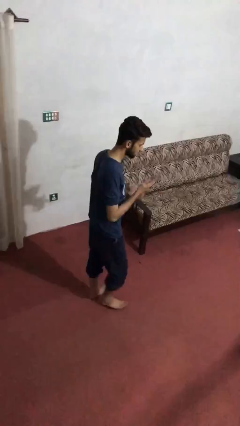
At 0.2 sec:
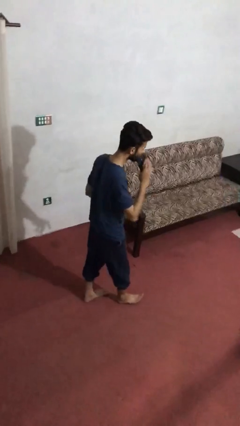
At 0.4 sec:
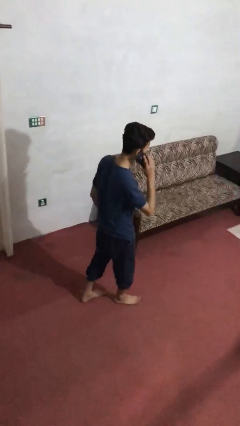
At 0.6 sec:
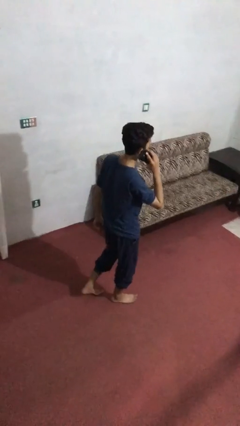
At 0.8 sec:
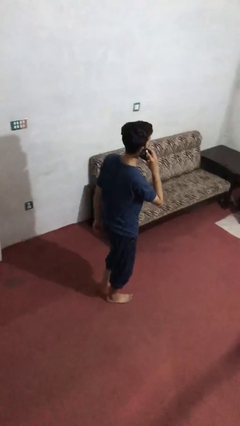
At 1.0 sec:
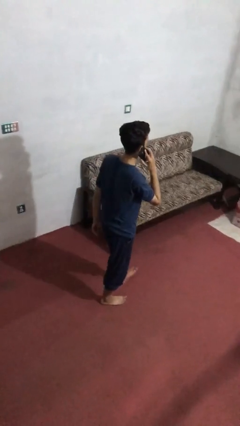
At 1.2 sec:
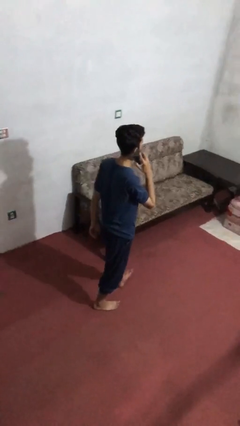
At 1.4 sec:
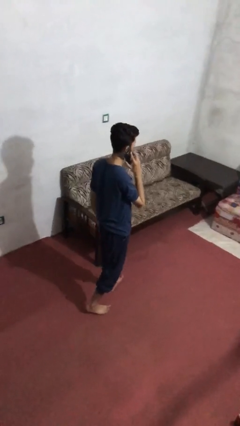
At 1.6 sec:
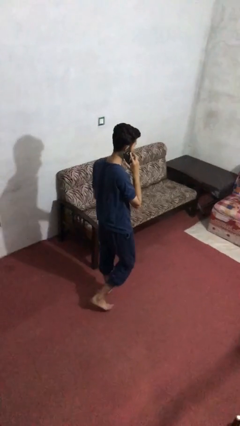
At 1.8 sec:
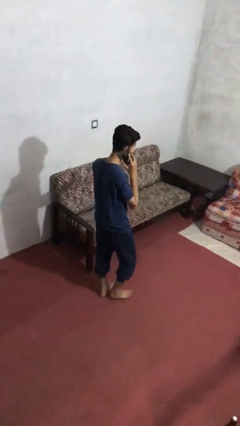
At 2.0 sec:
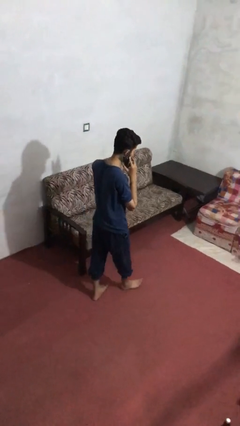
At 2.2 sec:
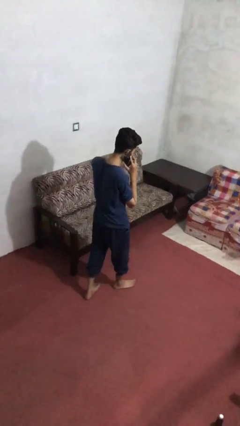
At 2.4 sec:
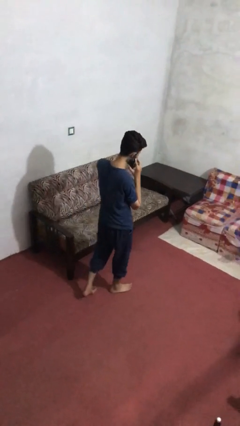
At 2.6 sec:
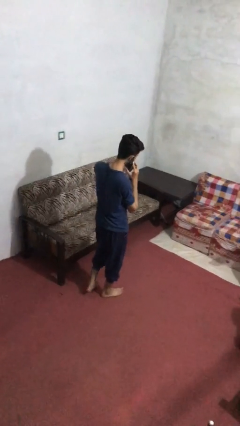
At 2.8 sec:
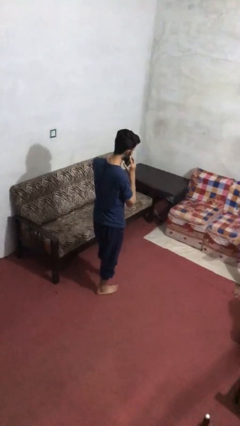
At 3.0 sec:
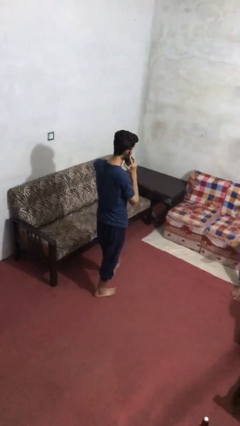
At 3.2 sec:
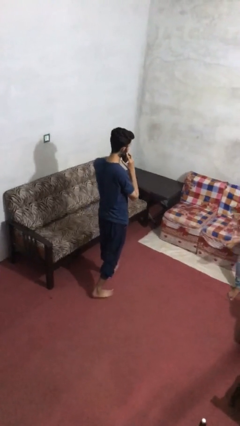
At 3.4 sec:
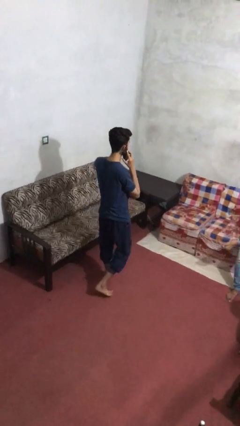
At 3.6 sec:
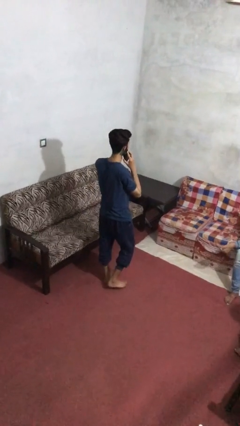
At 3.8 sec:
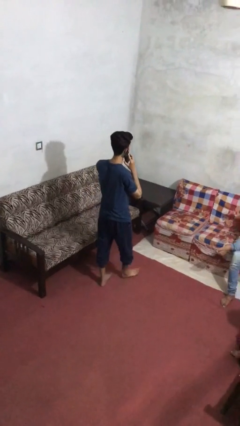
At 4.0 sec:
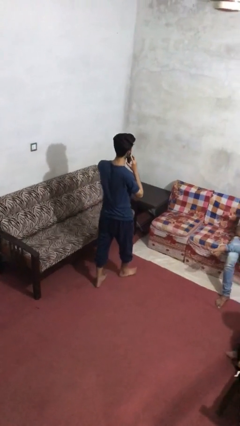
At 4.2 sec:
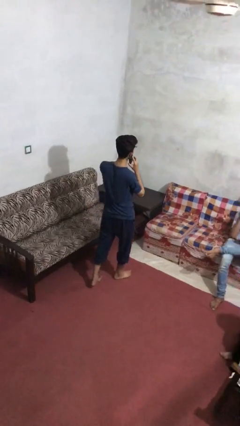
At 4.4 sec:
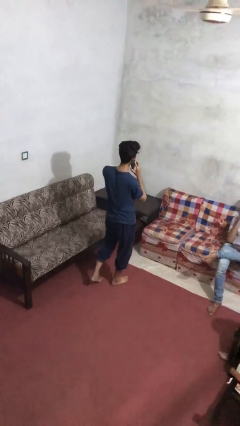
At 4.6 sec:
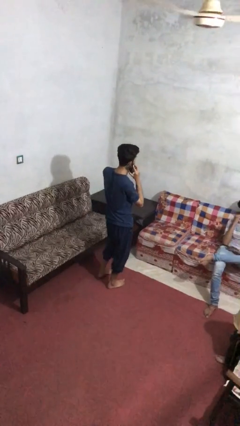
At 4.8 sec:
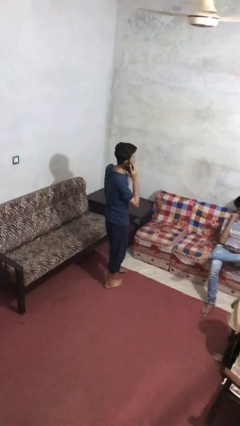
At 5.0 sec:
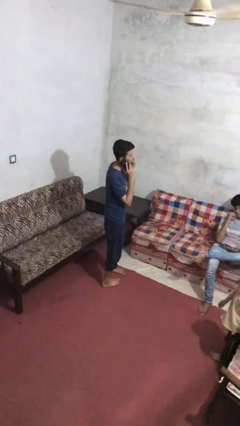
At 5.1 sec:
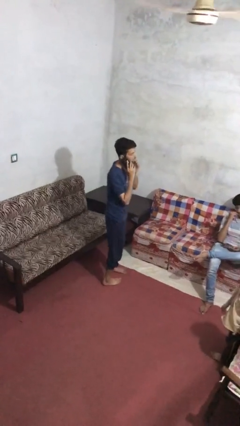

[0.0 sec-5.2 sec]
person talks on phone

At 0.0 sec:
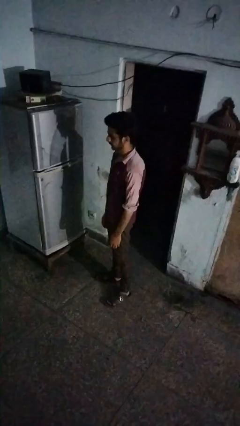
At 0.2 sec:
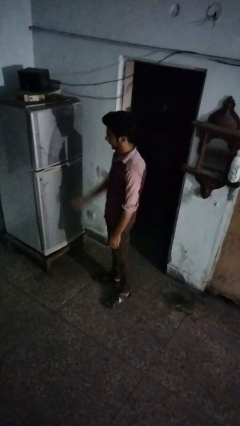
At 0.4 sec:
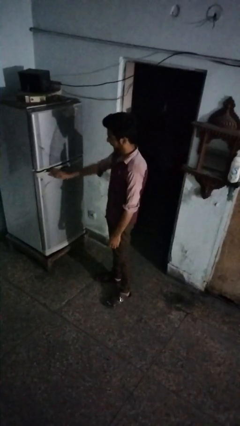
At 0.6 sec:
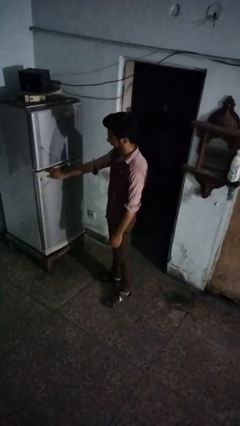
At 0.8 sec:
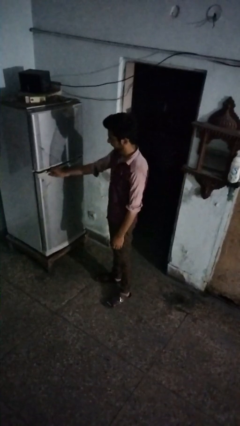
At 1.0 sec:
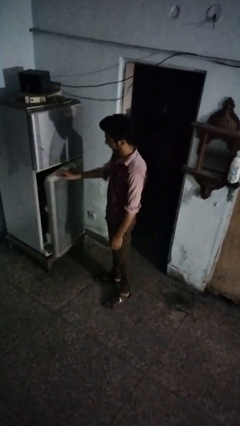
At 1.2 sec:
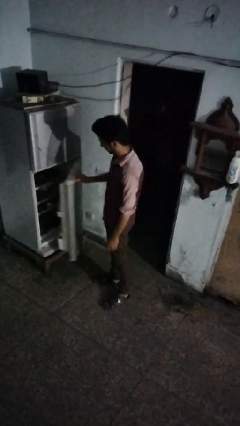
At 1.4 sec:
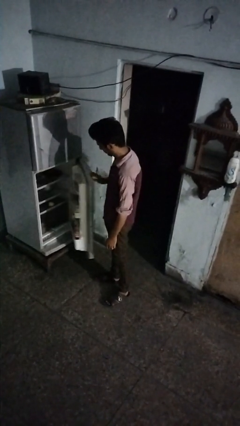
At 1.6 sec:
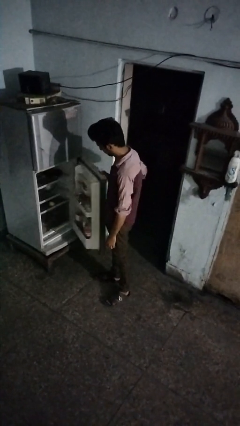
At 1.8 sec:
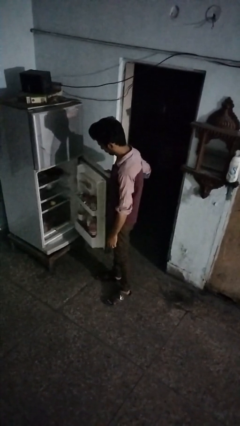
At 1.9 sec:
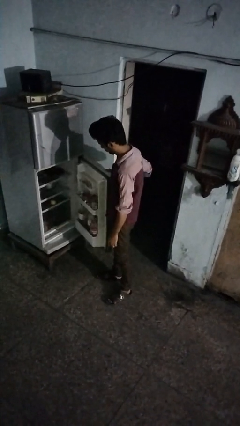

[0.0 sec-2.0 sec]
person opens refrigerator

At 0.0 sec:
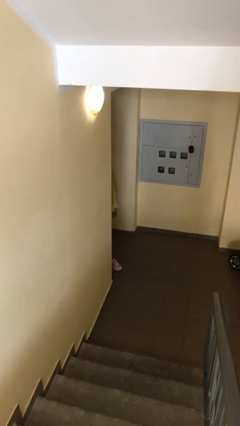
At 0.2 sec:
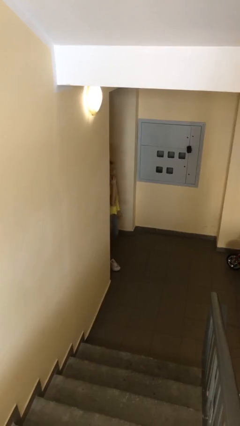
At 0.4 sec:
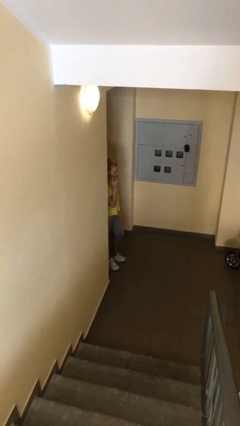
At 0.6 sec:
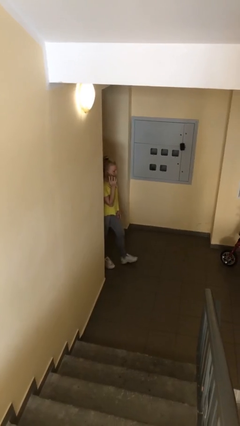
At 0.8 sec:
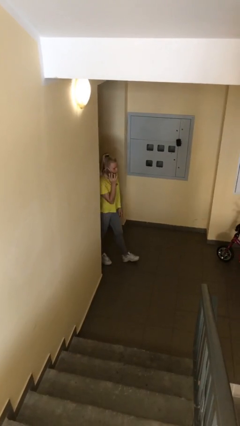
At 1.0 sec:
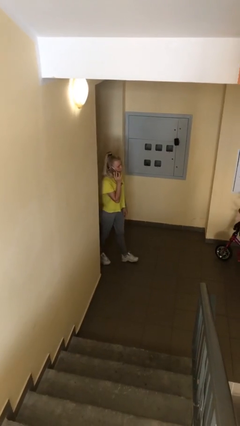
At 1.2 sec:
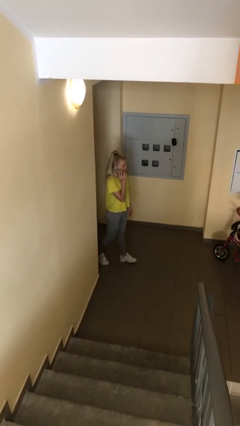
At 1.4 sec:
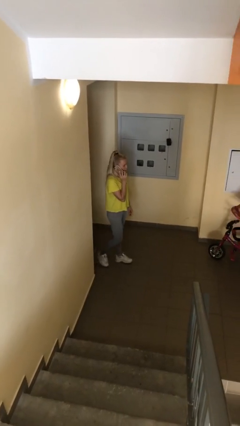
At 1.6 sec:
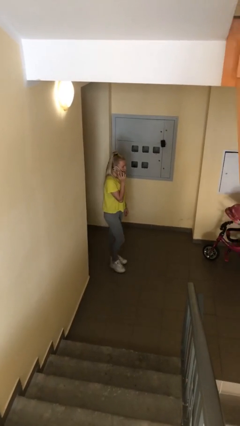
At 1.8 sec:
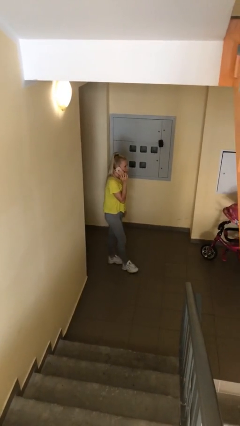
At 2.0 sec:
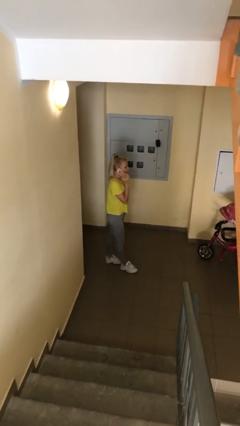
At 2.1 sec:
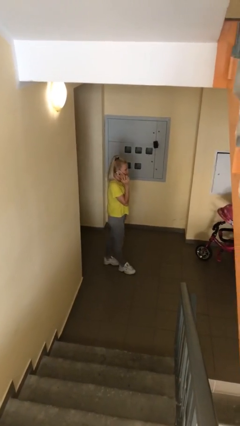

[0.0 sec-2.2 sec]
person enters scene through structure

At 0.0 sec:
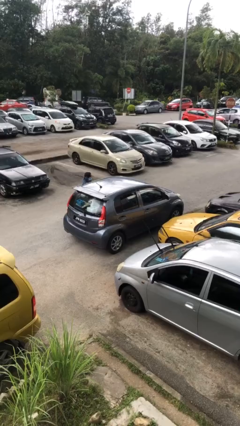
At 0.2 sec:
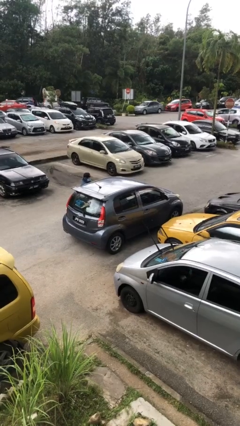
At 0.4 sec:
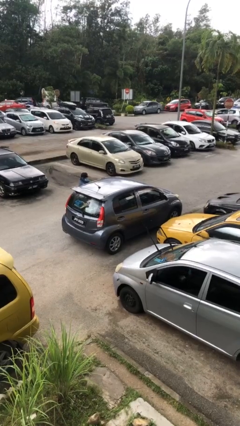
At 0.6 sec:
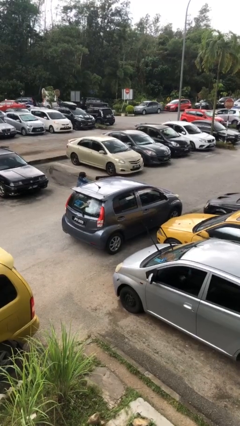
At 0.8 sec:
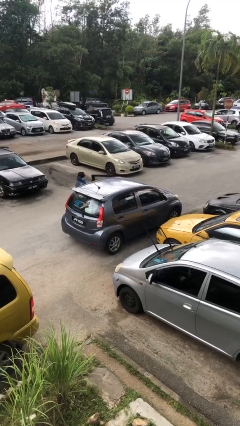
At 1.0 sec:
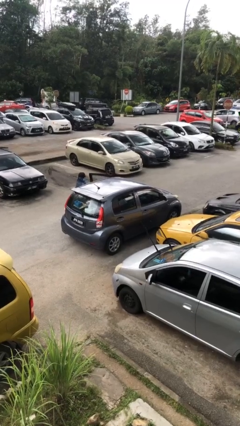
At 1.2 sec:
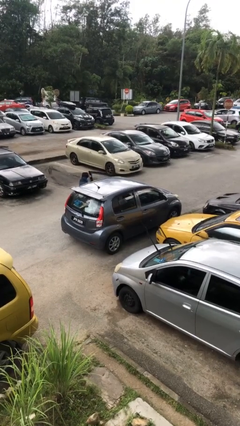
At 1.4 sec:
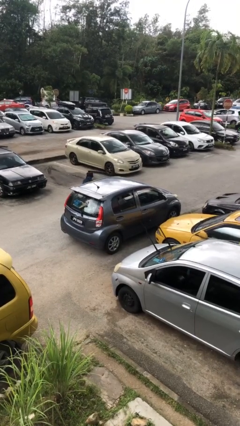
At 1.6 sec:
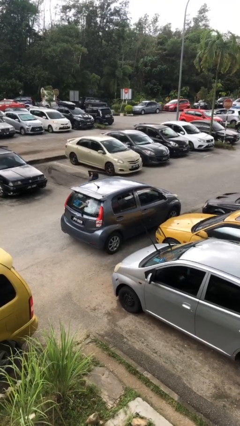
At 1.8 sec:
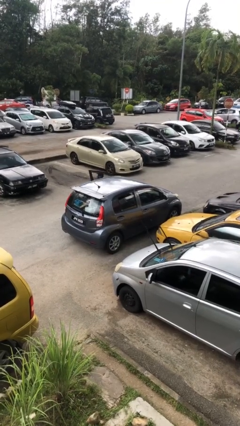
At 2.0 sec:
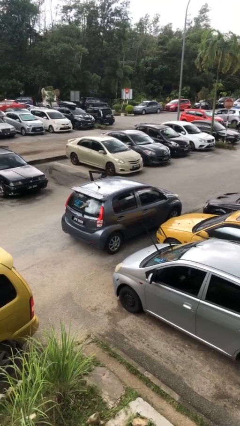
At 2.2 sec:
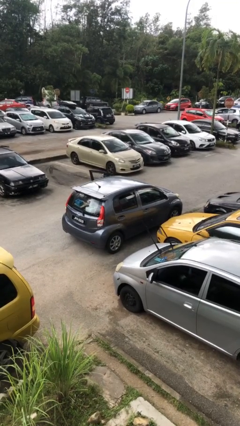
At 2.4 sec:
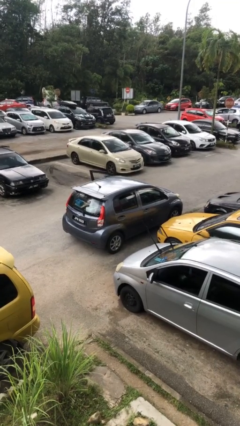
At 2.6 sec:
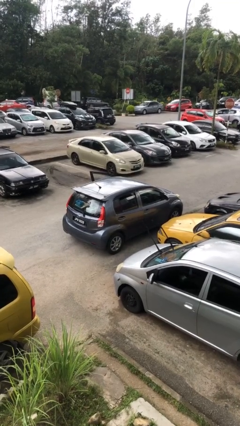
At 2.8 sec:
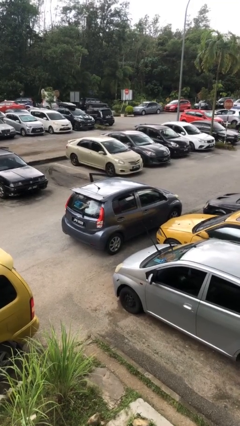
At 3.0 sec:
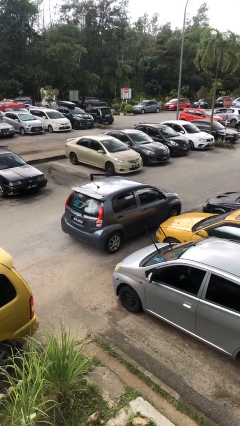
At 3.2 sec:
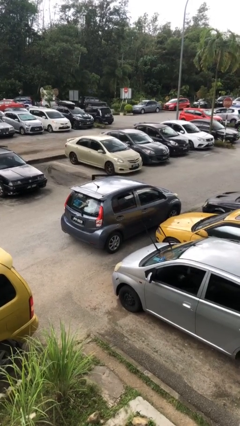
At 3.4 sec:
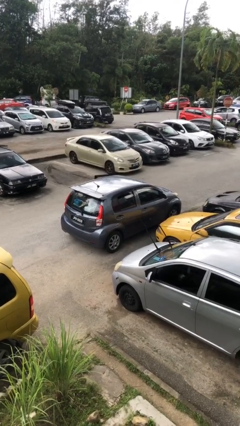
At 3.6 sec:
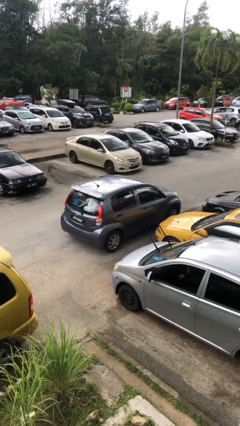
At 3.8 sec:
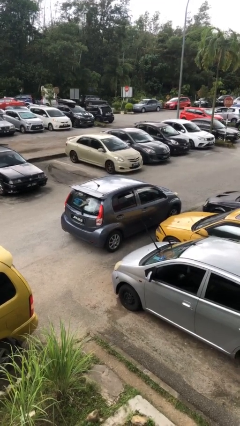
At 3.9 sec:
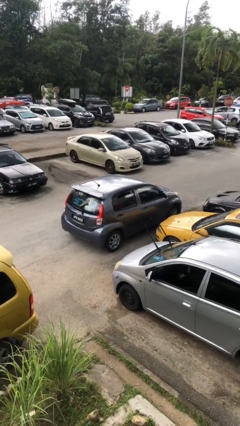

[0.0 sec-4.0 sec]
car picks up person

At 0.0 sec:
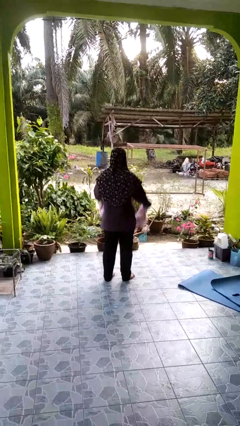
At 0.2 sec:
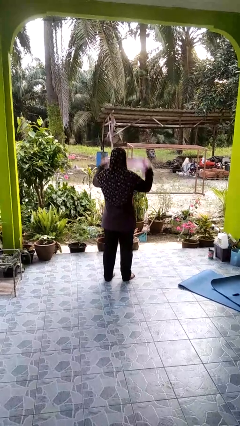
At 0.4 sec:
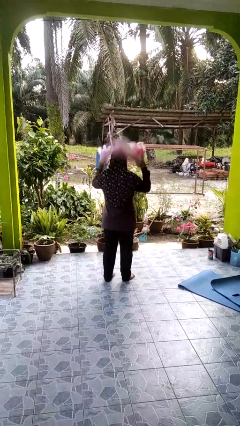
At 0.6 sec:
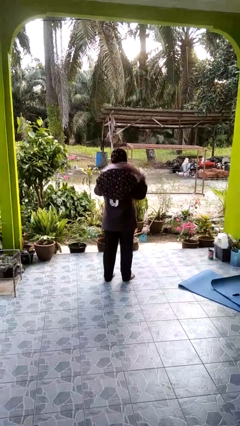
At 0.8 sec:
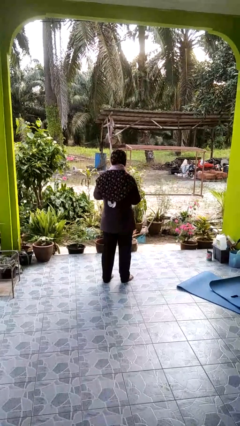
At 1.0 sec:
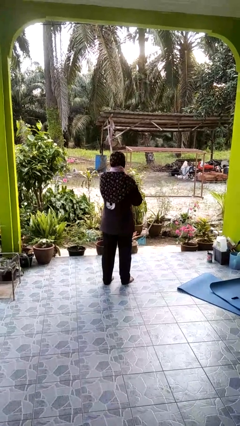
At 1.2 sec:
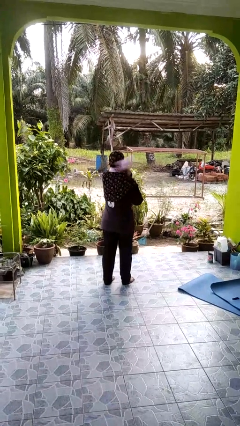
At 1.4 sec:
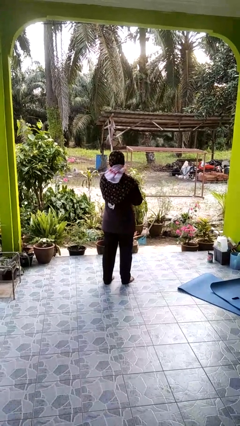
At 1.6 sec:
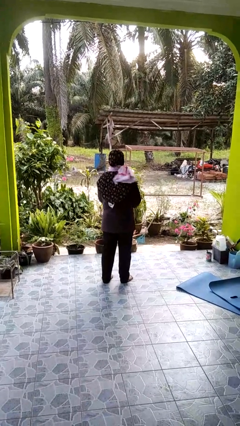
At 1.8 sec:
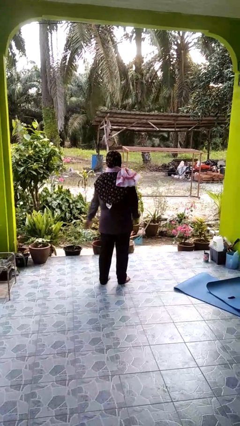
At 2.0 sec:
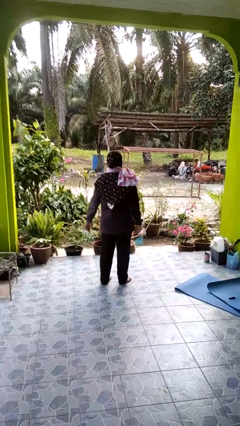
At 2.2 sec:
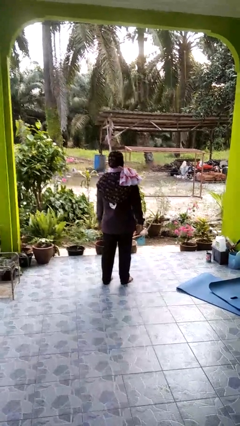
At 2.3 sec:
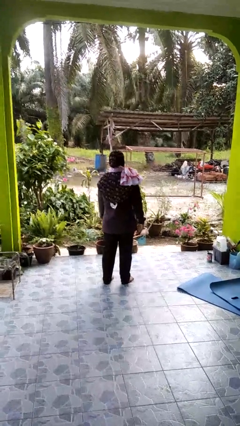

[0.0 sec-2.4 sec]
person puts on scarf

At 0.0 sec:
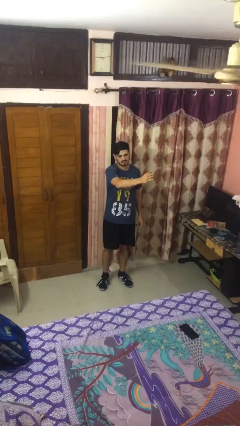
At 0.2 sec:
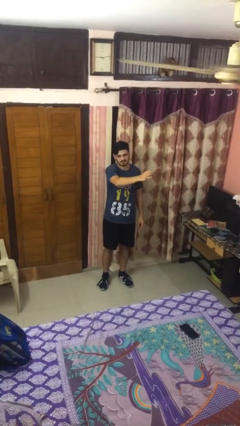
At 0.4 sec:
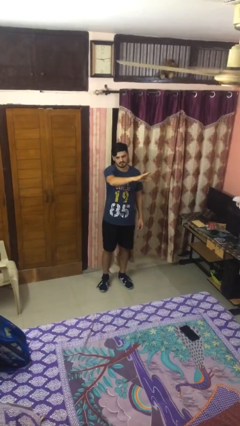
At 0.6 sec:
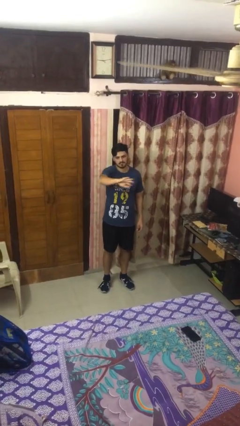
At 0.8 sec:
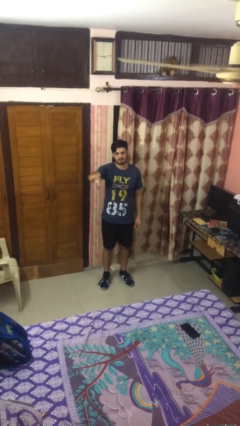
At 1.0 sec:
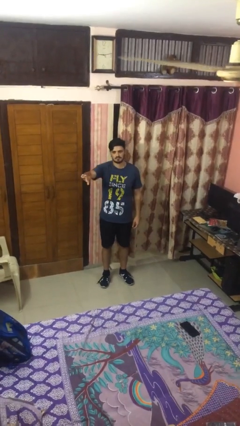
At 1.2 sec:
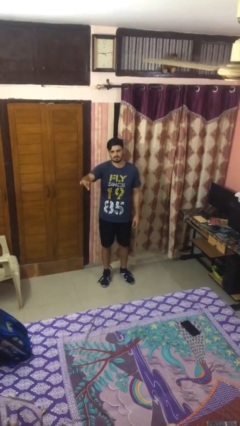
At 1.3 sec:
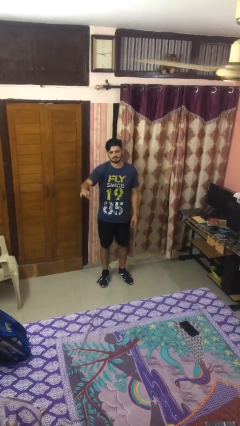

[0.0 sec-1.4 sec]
person gestures swipe right
